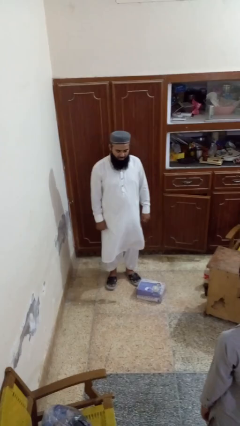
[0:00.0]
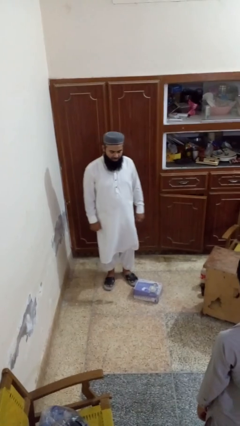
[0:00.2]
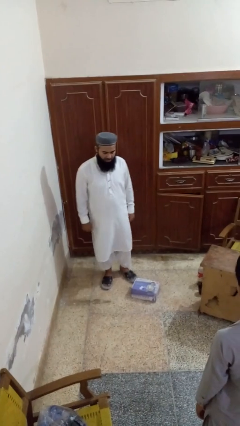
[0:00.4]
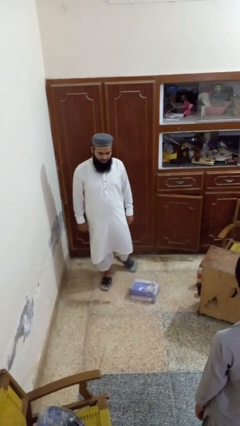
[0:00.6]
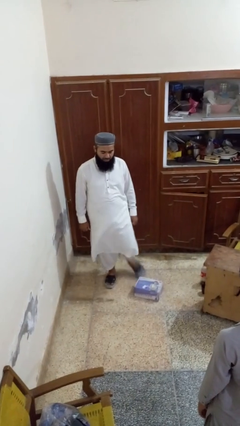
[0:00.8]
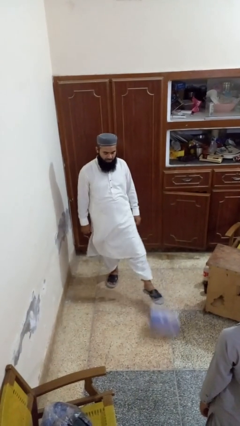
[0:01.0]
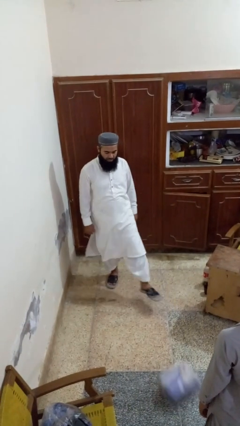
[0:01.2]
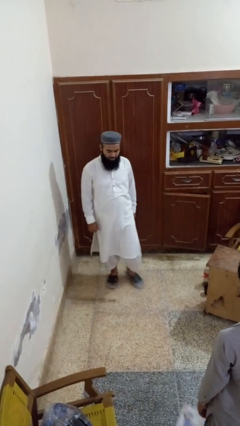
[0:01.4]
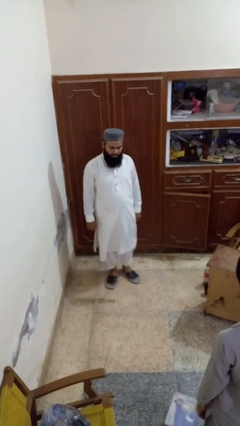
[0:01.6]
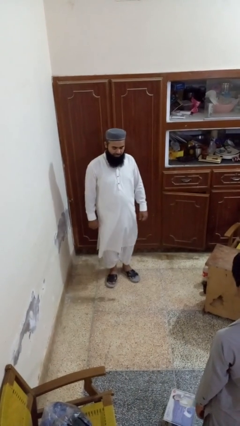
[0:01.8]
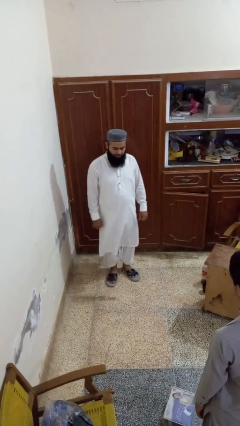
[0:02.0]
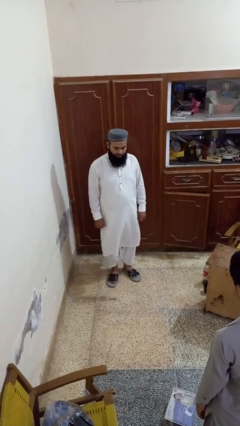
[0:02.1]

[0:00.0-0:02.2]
person kicks object to person

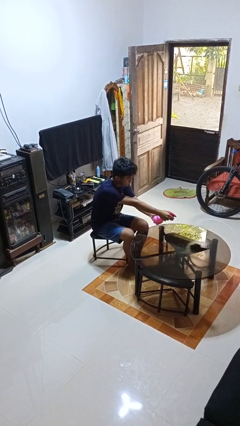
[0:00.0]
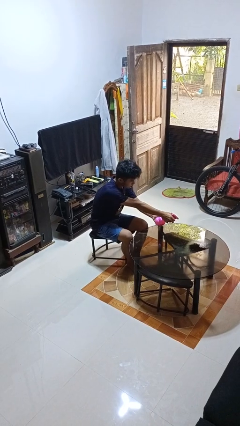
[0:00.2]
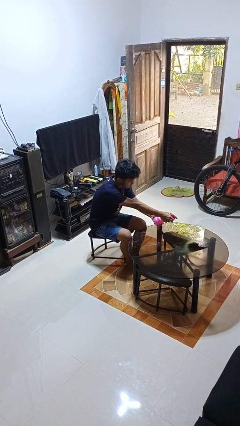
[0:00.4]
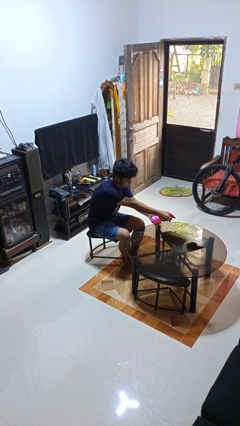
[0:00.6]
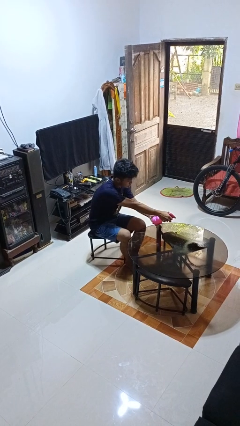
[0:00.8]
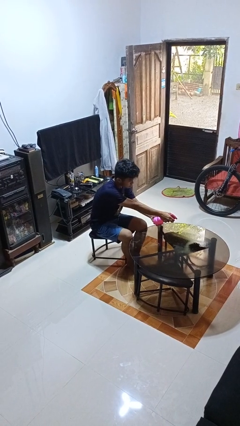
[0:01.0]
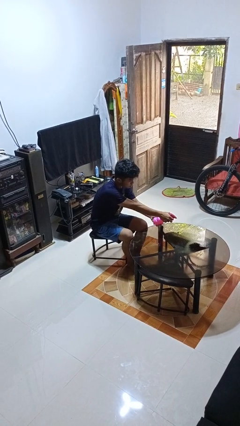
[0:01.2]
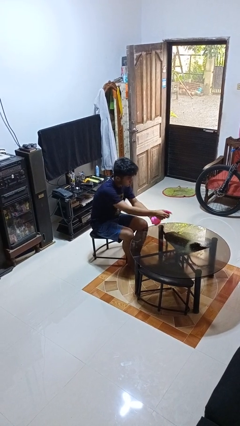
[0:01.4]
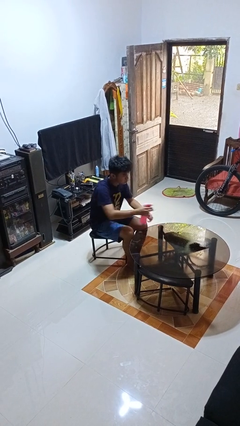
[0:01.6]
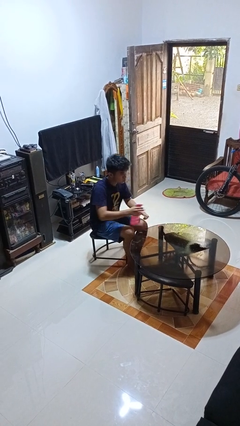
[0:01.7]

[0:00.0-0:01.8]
person sprays from bottle

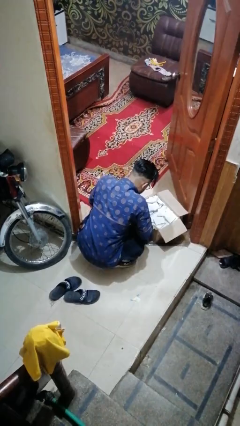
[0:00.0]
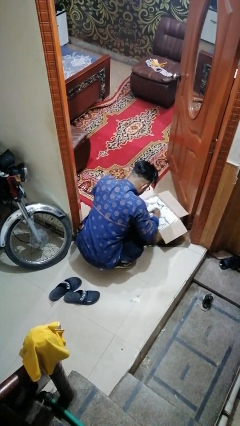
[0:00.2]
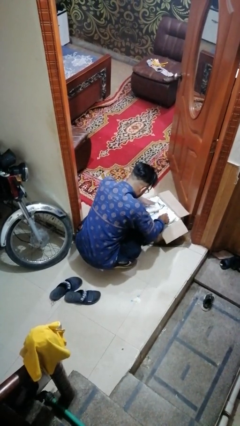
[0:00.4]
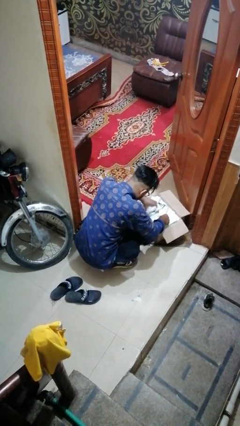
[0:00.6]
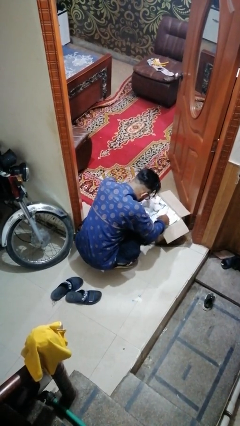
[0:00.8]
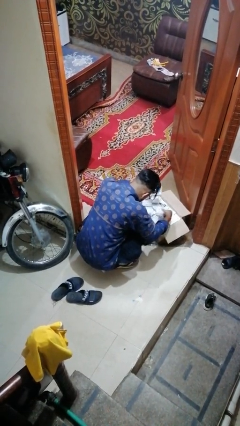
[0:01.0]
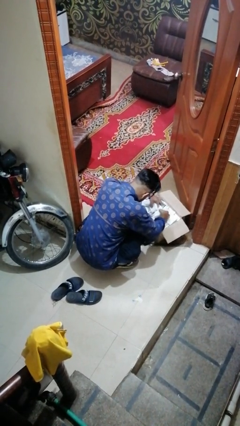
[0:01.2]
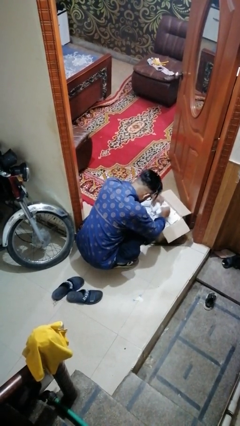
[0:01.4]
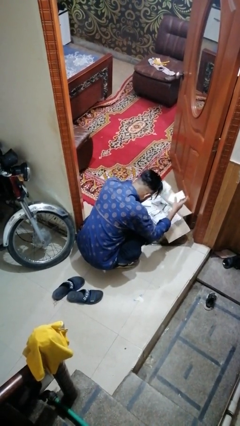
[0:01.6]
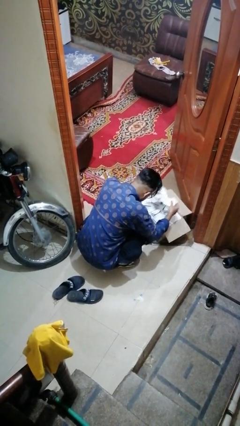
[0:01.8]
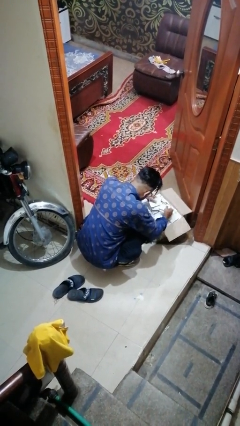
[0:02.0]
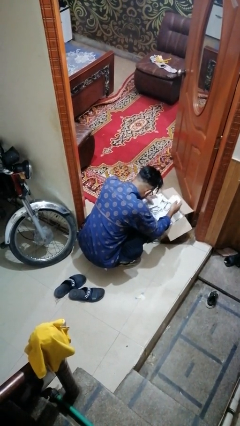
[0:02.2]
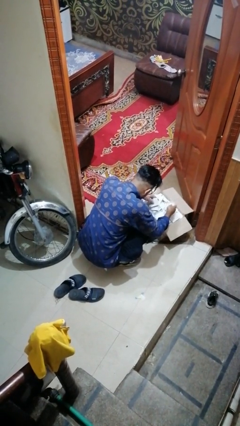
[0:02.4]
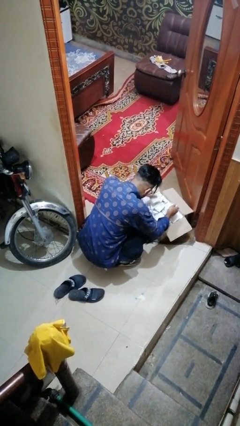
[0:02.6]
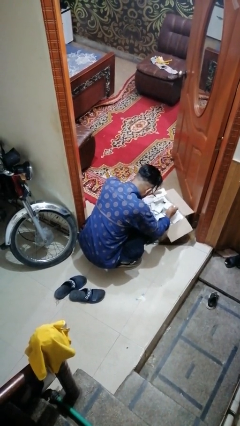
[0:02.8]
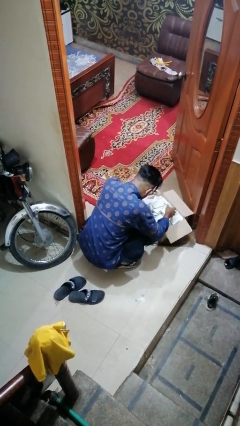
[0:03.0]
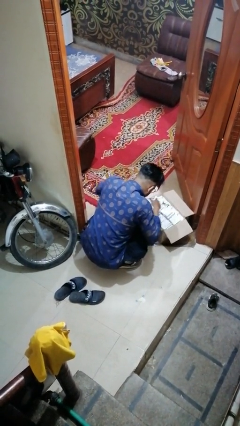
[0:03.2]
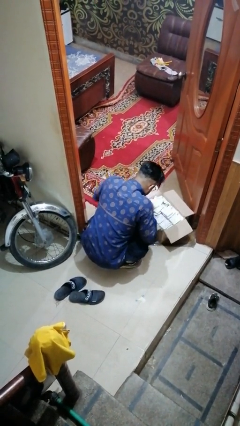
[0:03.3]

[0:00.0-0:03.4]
person searches in box

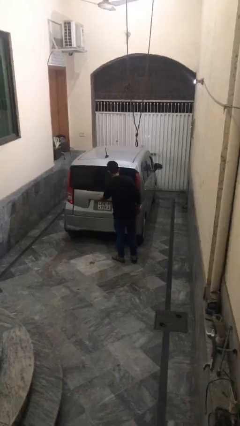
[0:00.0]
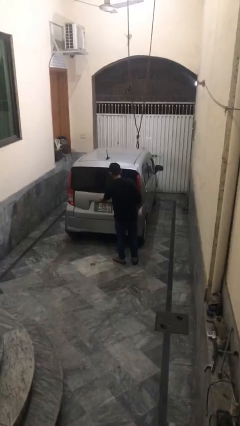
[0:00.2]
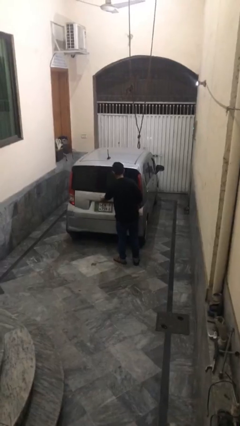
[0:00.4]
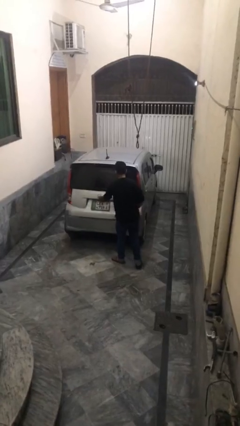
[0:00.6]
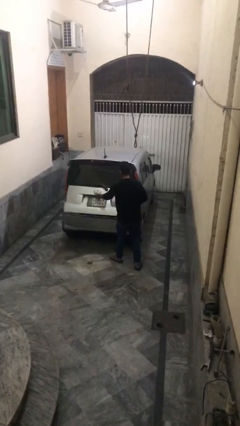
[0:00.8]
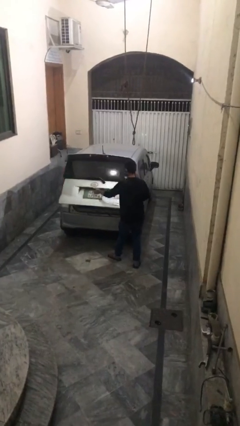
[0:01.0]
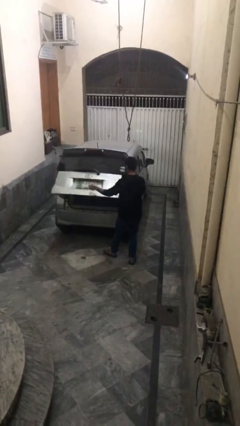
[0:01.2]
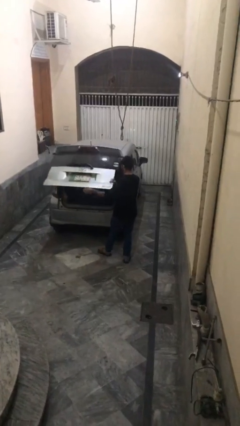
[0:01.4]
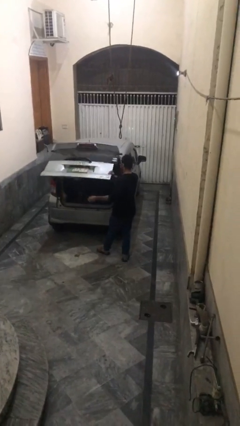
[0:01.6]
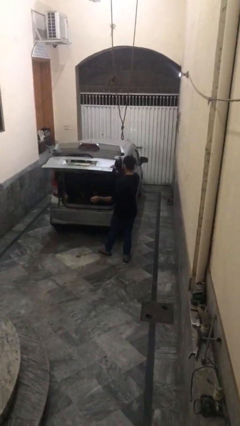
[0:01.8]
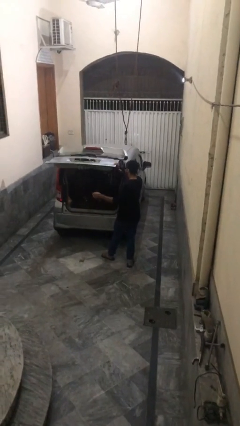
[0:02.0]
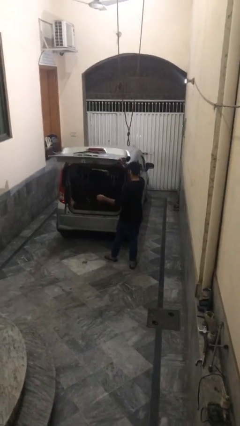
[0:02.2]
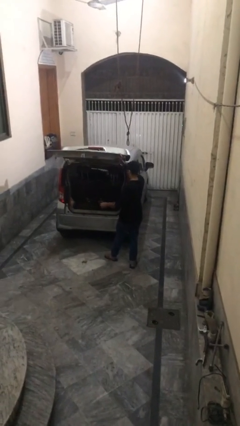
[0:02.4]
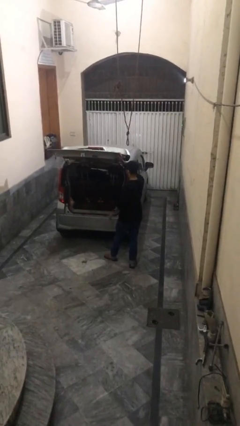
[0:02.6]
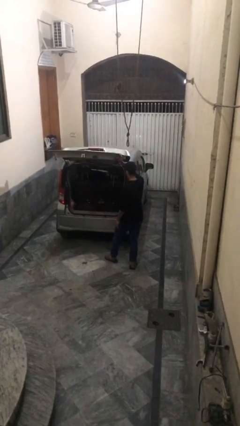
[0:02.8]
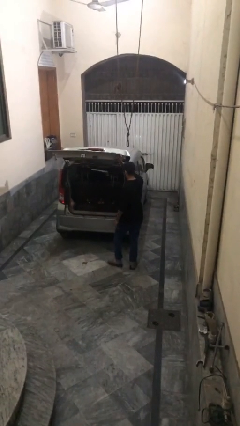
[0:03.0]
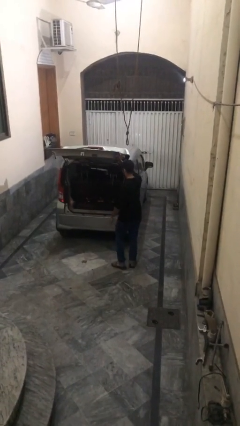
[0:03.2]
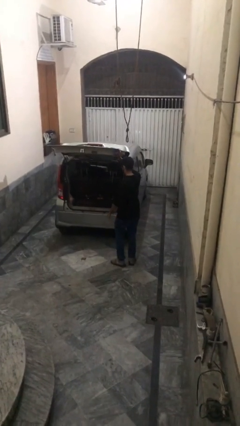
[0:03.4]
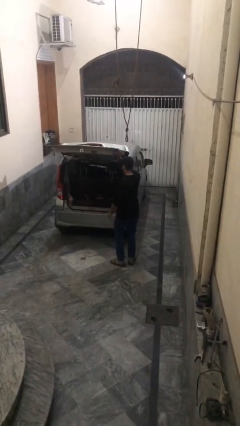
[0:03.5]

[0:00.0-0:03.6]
person opens car trunk

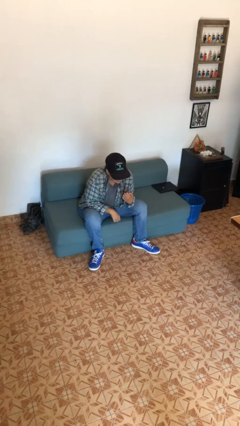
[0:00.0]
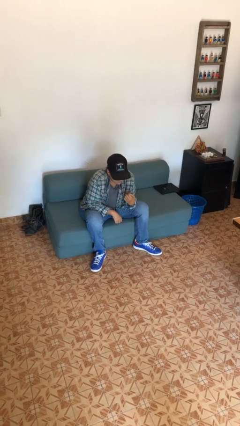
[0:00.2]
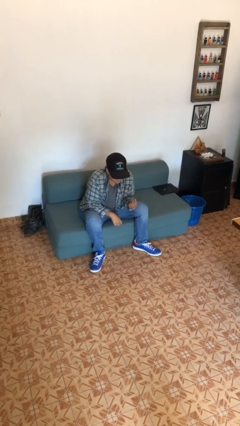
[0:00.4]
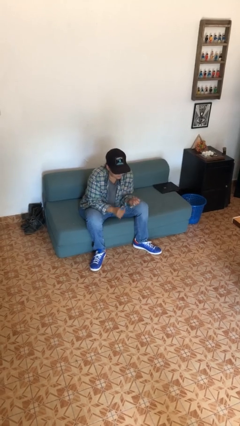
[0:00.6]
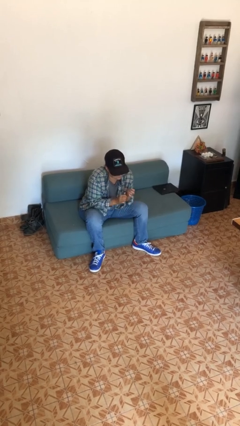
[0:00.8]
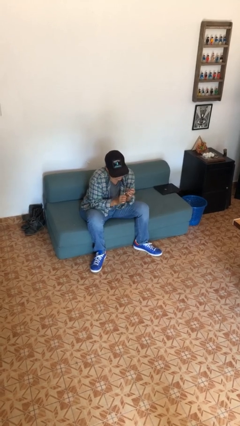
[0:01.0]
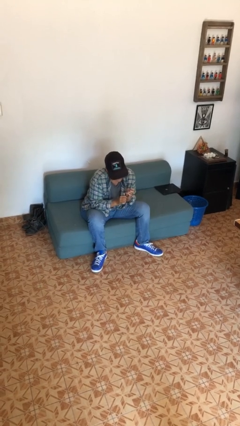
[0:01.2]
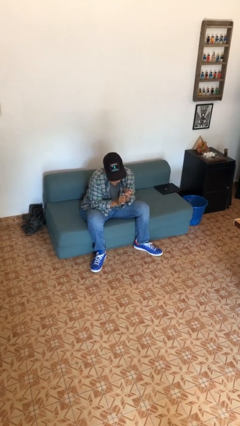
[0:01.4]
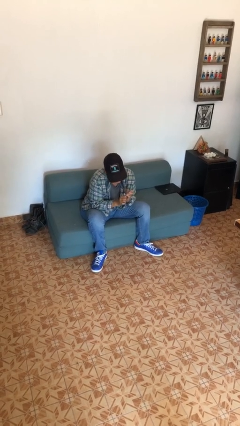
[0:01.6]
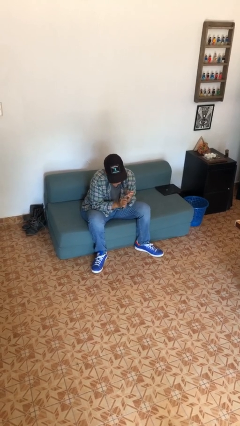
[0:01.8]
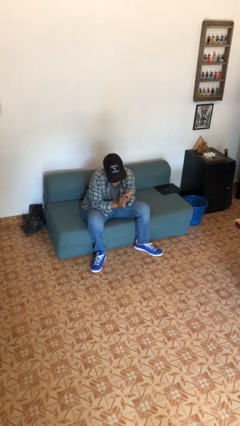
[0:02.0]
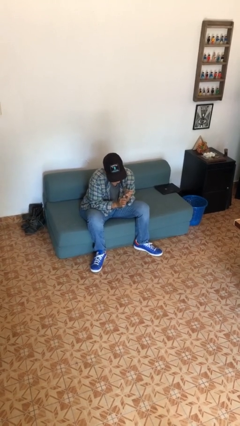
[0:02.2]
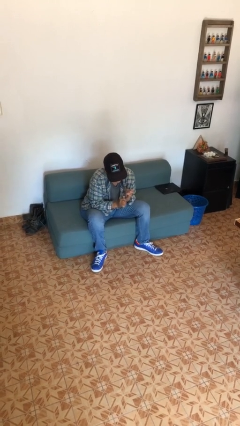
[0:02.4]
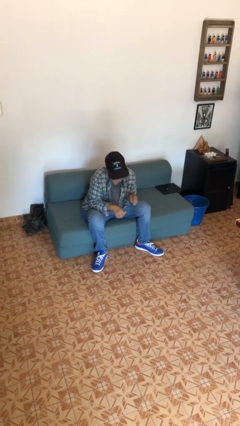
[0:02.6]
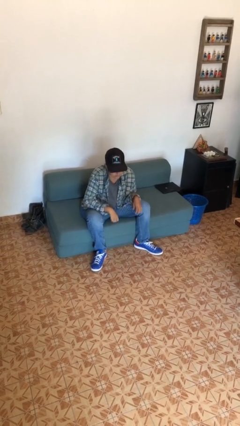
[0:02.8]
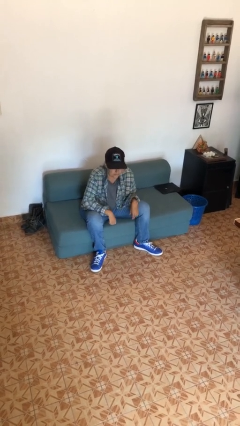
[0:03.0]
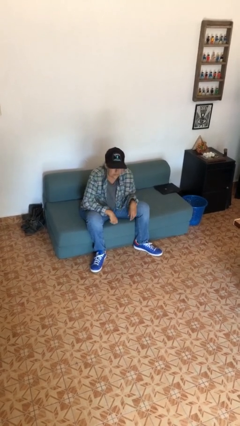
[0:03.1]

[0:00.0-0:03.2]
person files fingernails

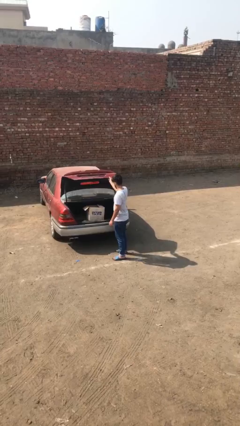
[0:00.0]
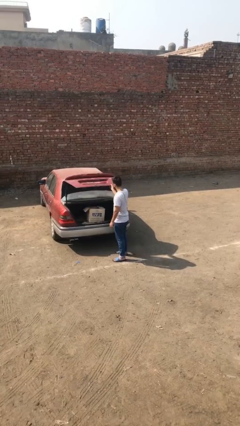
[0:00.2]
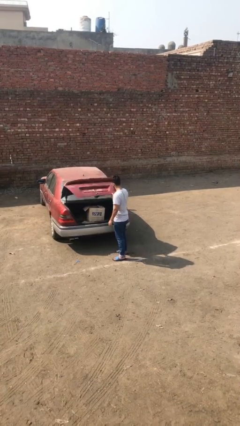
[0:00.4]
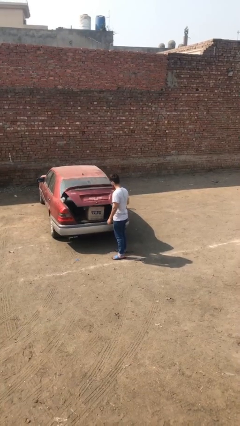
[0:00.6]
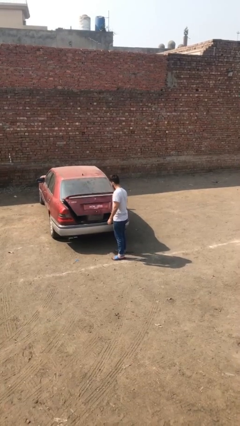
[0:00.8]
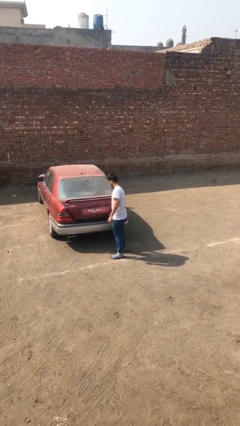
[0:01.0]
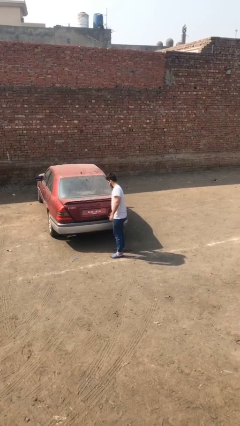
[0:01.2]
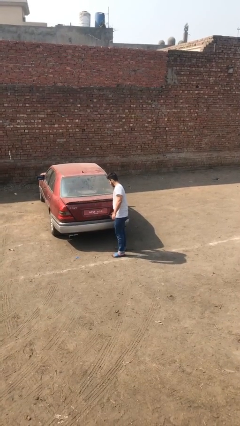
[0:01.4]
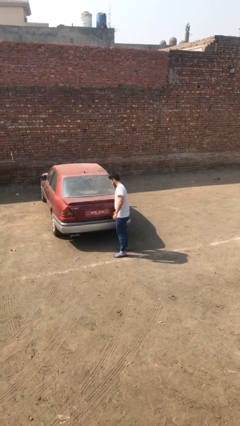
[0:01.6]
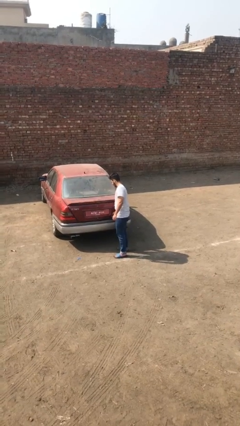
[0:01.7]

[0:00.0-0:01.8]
person closes car trunk

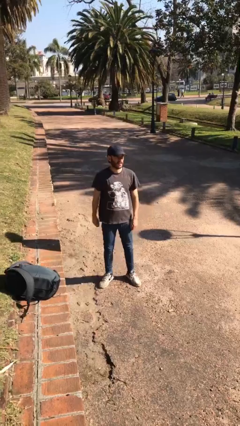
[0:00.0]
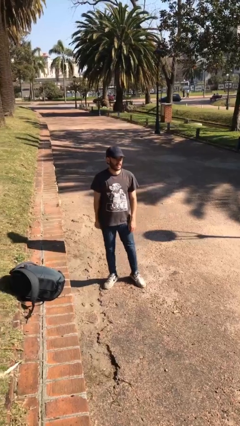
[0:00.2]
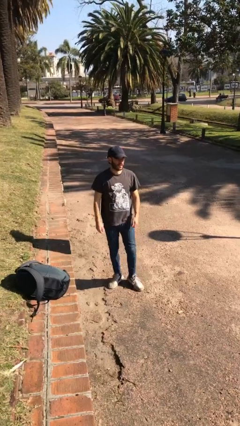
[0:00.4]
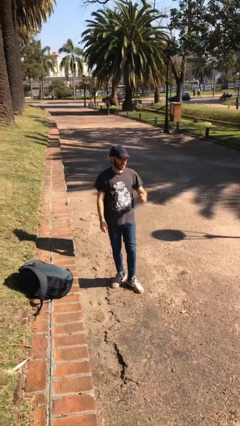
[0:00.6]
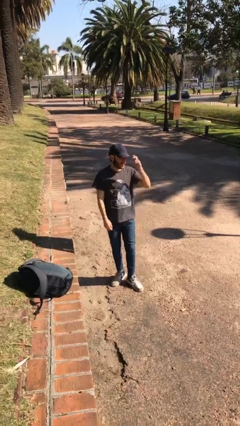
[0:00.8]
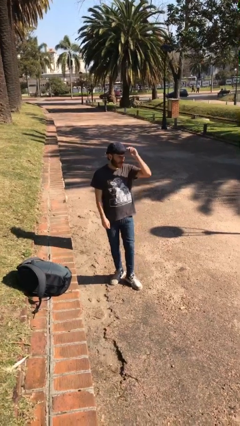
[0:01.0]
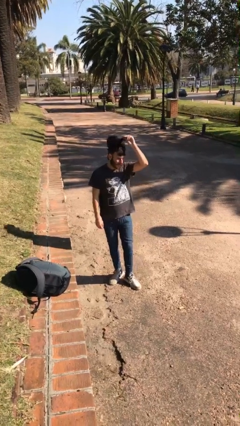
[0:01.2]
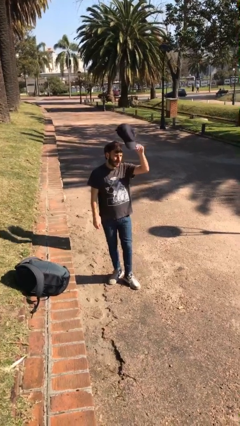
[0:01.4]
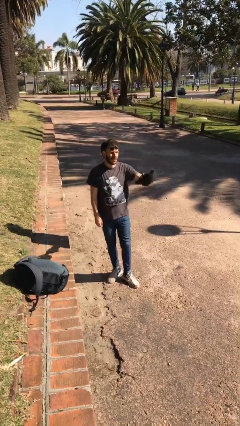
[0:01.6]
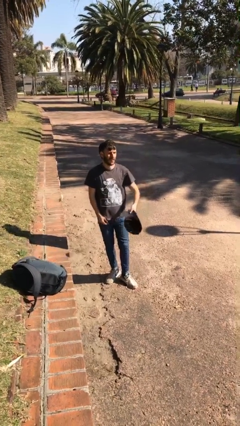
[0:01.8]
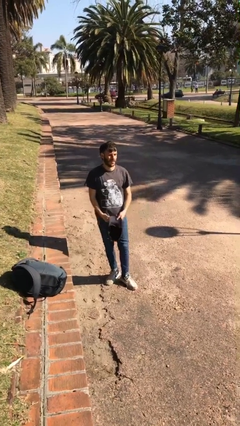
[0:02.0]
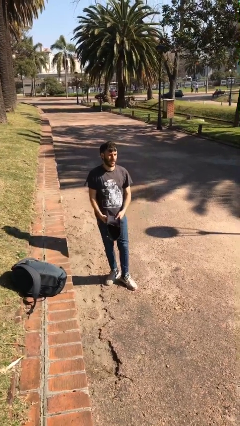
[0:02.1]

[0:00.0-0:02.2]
person takes off hat
